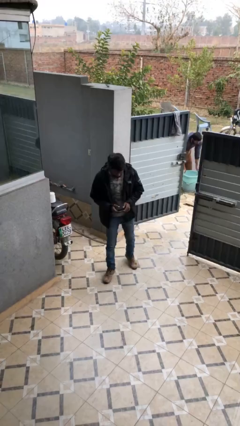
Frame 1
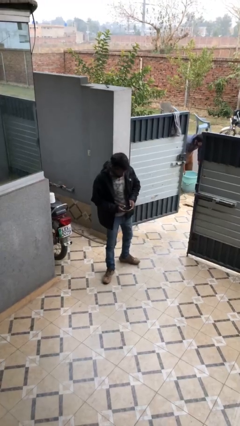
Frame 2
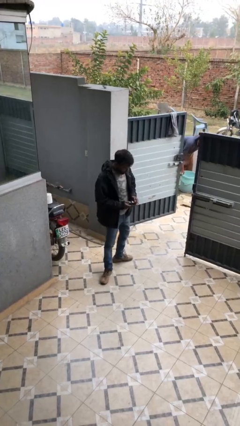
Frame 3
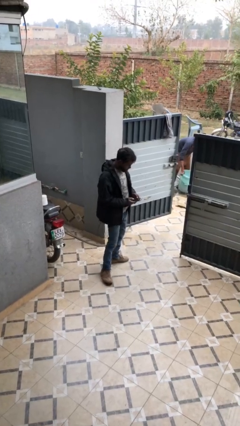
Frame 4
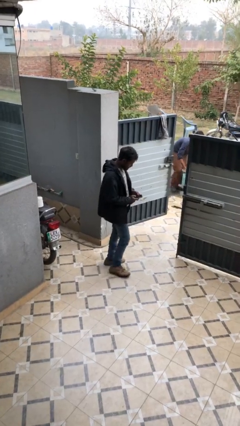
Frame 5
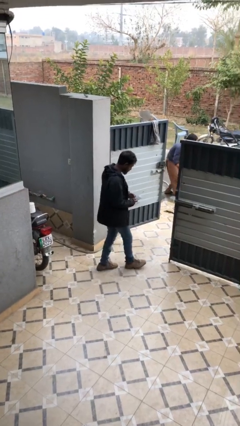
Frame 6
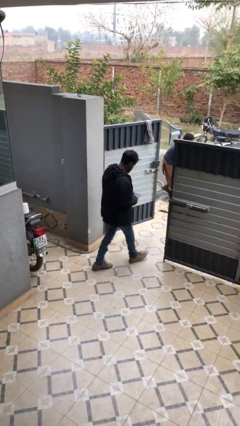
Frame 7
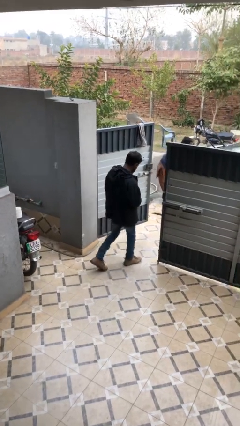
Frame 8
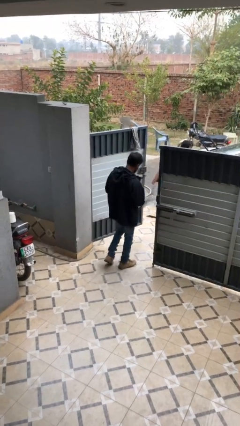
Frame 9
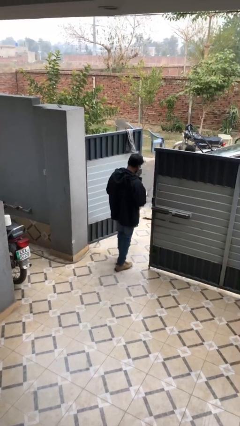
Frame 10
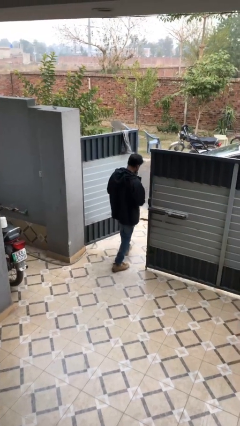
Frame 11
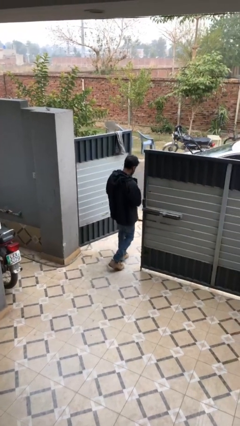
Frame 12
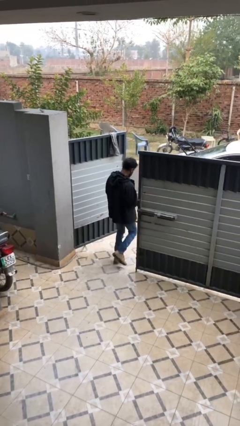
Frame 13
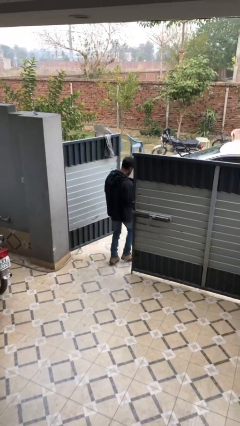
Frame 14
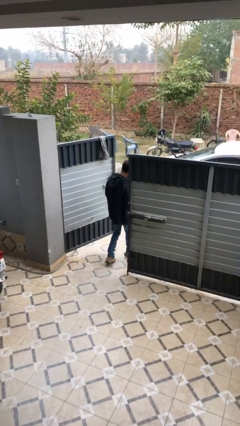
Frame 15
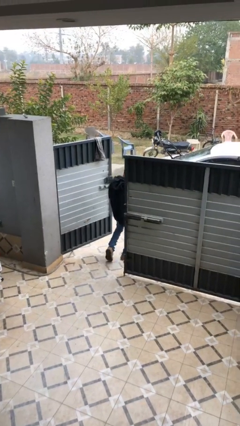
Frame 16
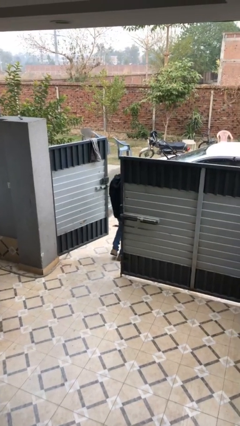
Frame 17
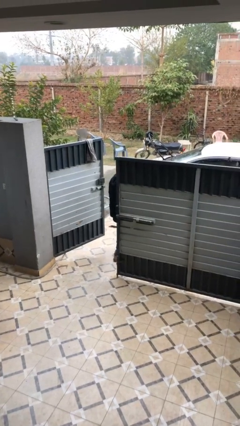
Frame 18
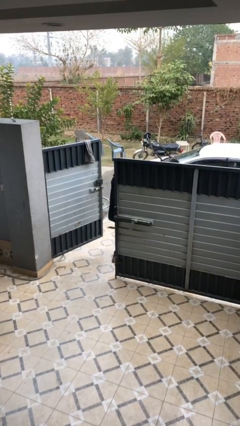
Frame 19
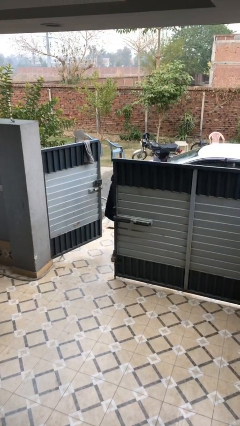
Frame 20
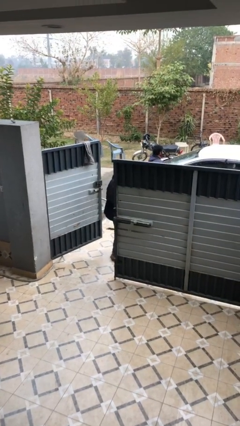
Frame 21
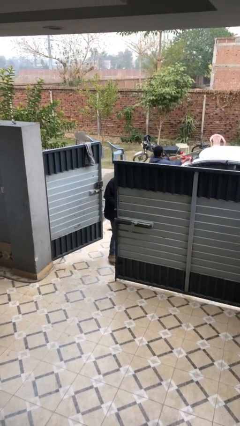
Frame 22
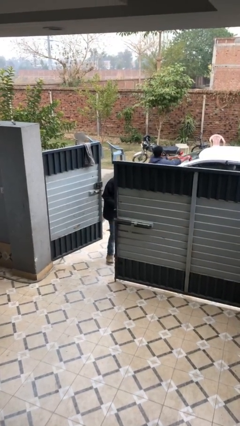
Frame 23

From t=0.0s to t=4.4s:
person exits scene through structure

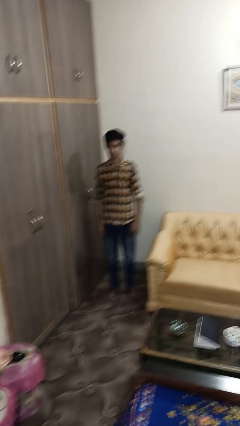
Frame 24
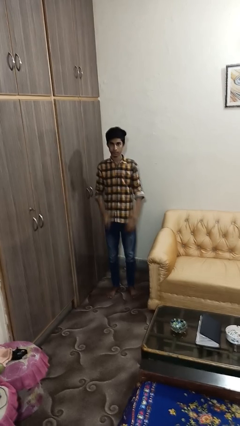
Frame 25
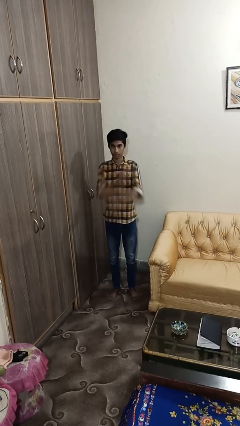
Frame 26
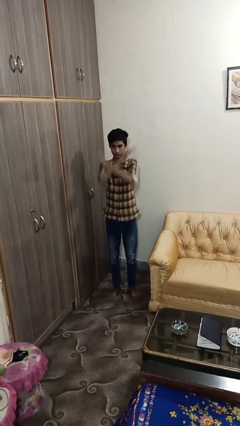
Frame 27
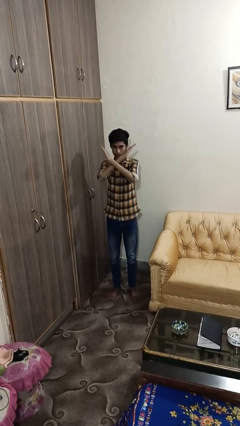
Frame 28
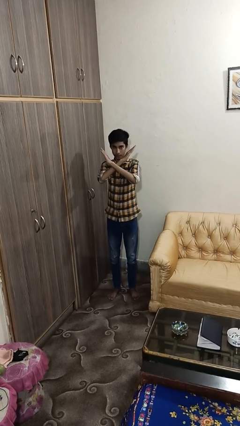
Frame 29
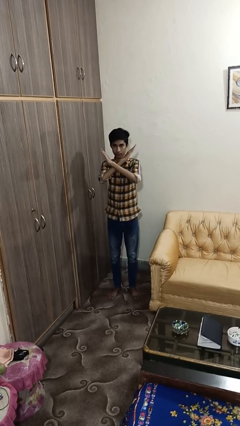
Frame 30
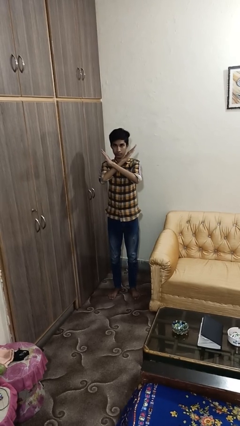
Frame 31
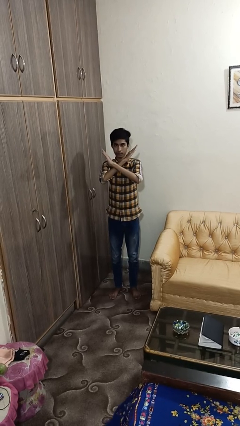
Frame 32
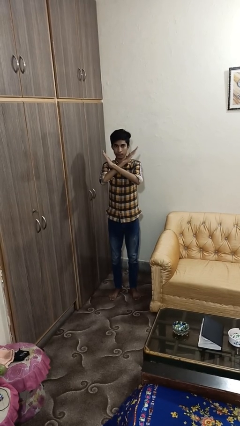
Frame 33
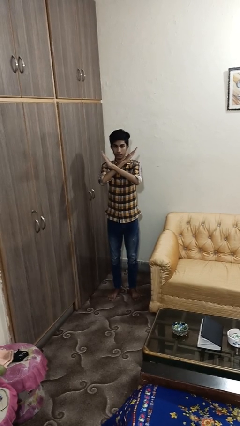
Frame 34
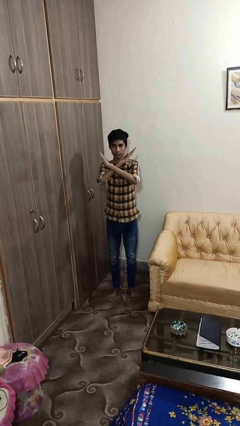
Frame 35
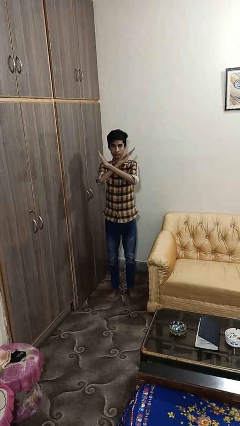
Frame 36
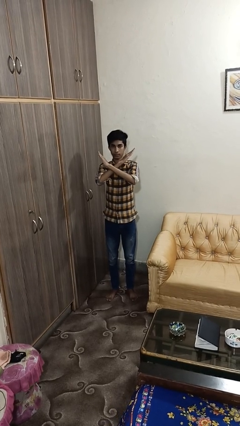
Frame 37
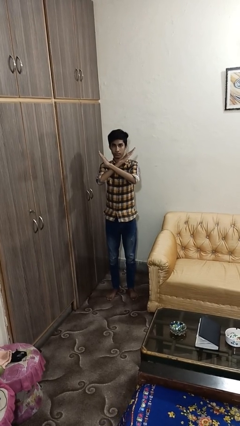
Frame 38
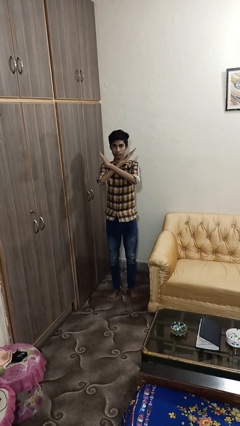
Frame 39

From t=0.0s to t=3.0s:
person gestures arms x

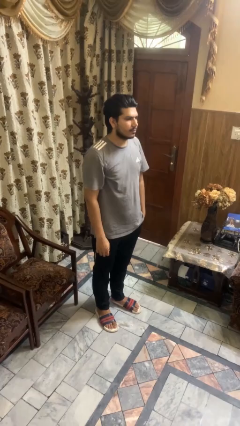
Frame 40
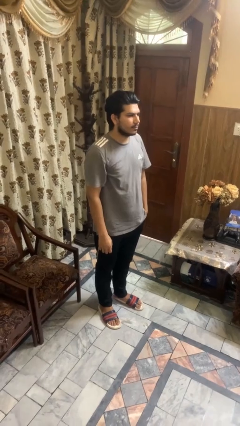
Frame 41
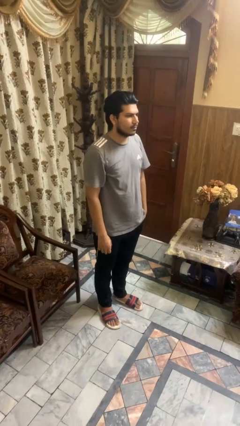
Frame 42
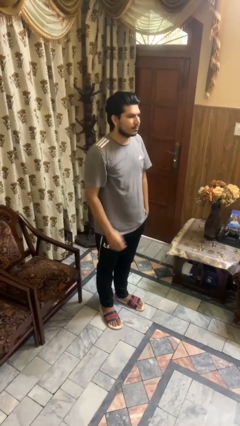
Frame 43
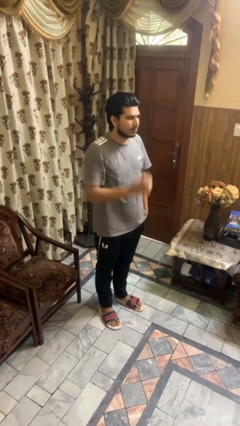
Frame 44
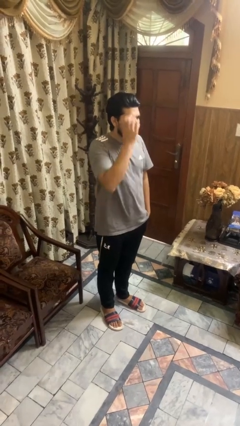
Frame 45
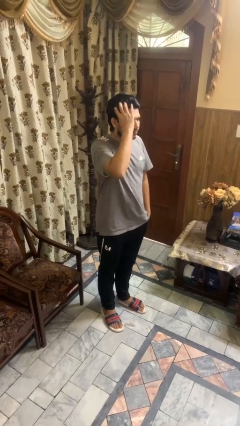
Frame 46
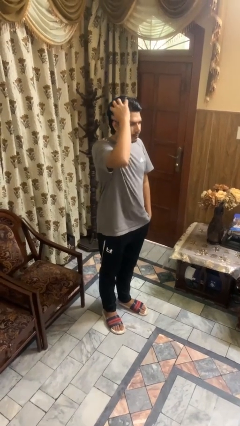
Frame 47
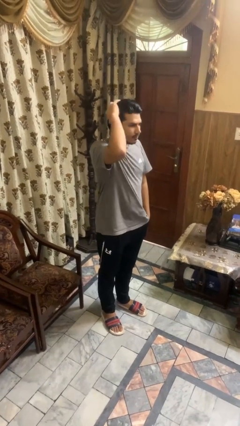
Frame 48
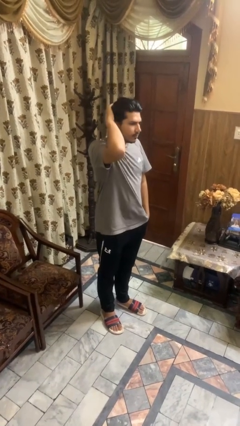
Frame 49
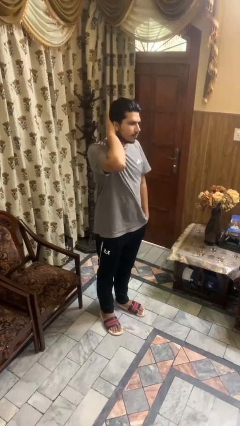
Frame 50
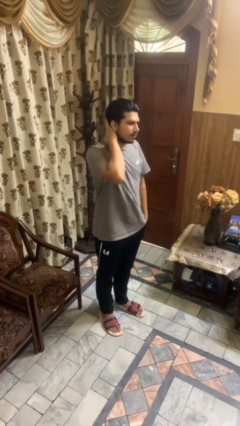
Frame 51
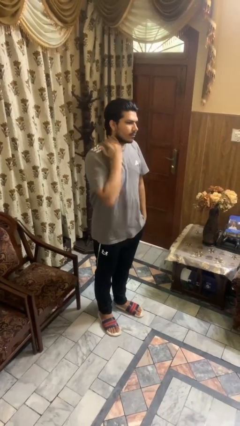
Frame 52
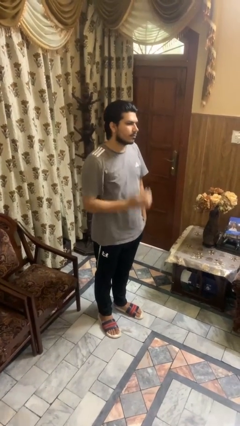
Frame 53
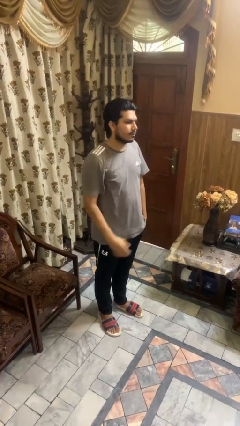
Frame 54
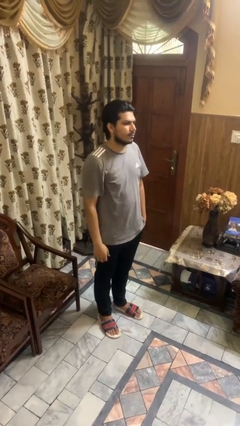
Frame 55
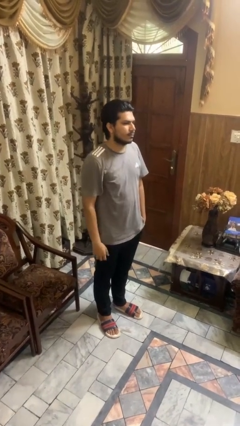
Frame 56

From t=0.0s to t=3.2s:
person strokes hair

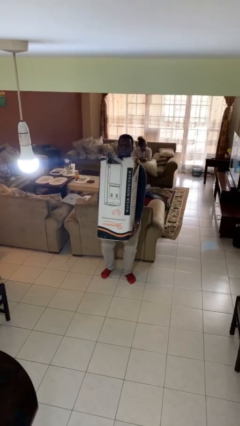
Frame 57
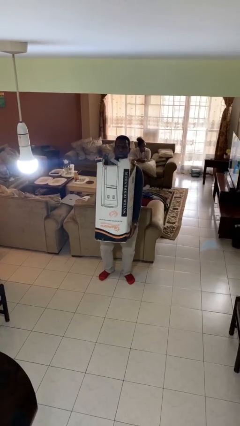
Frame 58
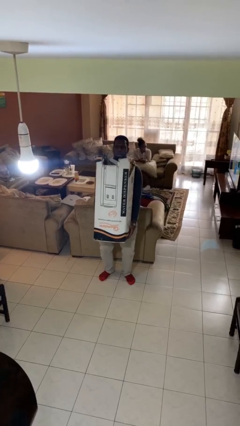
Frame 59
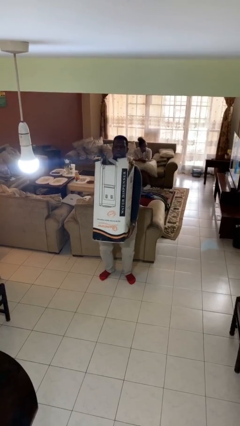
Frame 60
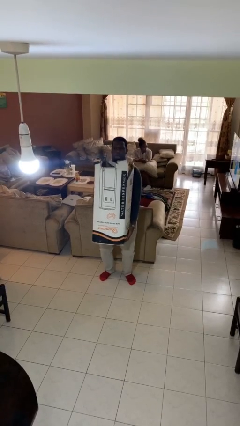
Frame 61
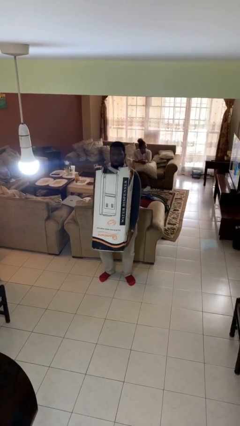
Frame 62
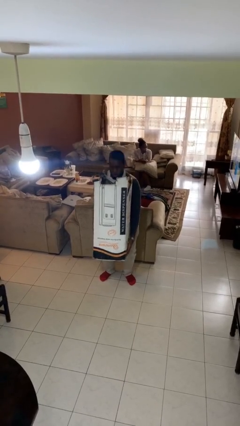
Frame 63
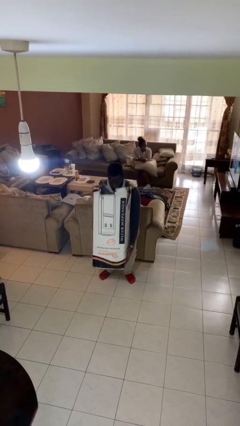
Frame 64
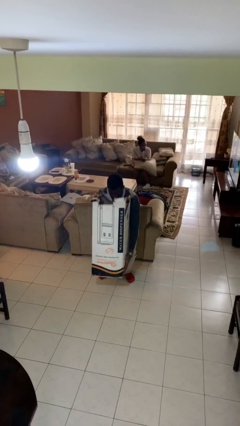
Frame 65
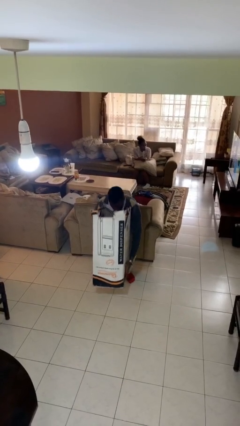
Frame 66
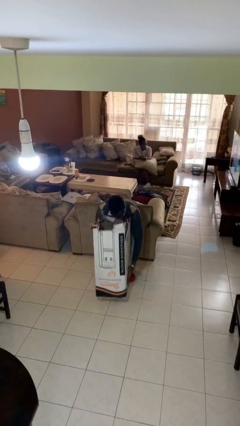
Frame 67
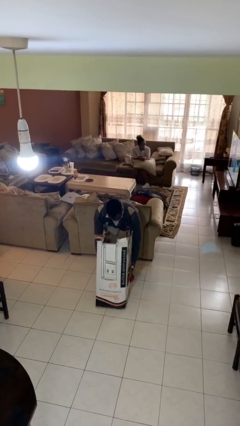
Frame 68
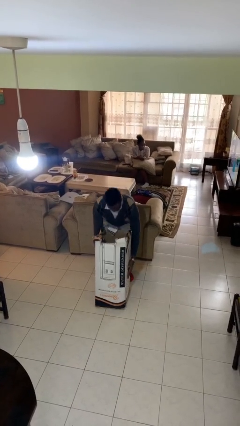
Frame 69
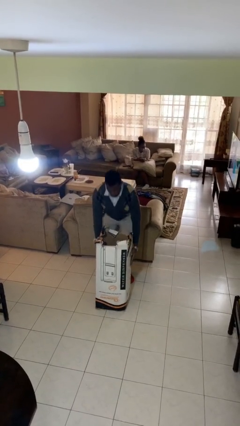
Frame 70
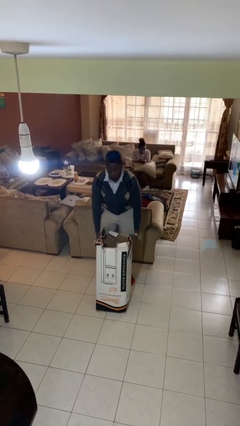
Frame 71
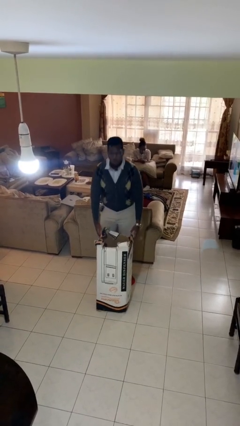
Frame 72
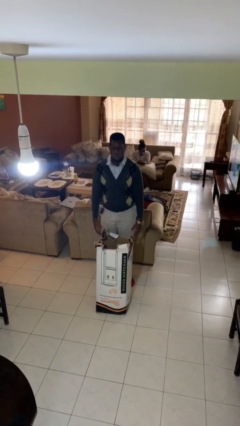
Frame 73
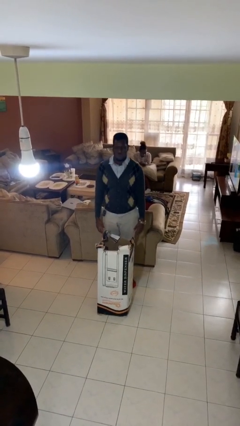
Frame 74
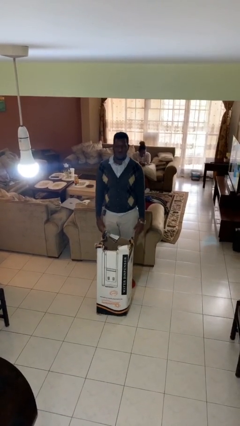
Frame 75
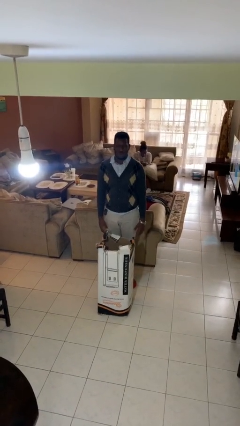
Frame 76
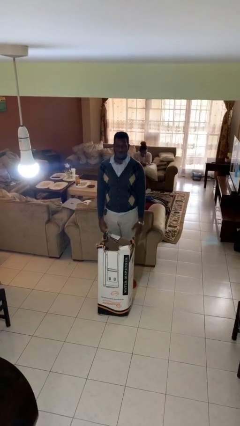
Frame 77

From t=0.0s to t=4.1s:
person puts down object on floor

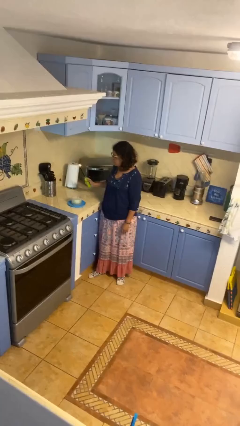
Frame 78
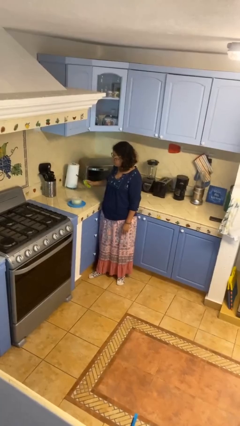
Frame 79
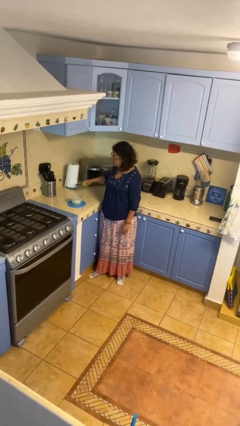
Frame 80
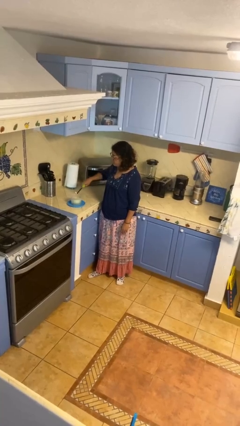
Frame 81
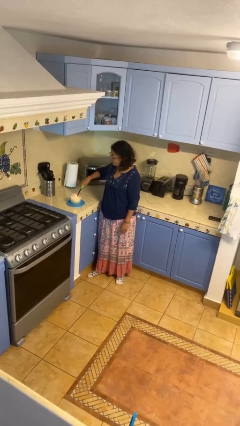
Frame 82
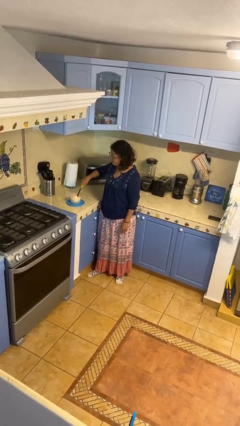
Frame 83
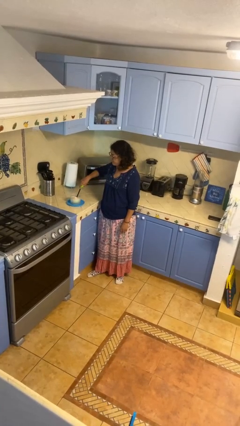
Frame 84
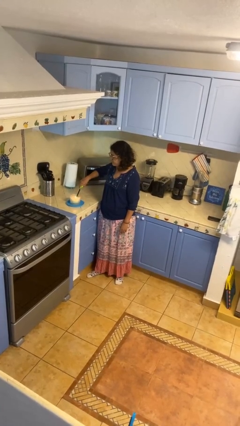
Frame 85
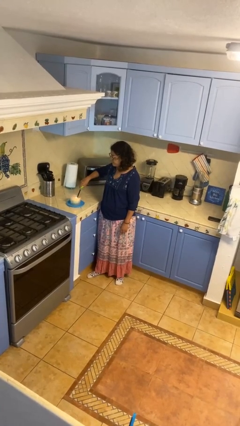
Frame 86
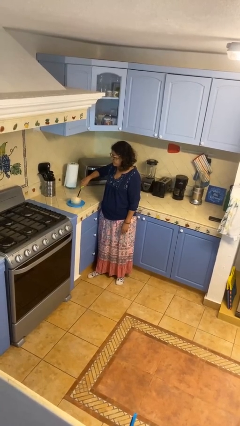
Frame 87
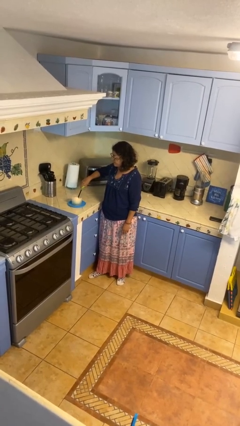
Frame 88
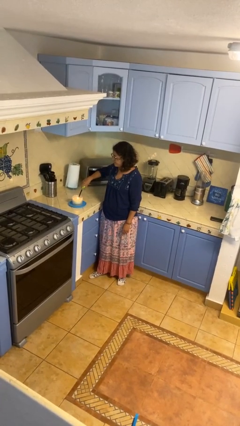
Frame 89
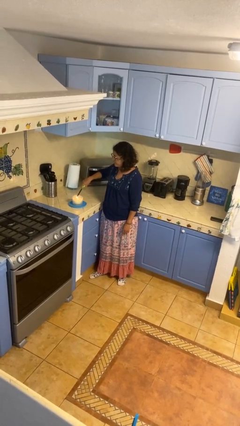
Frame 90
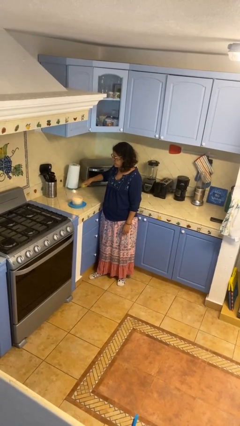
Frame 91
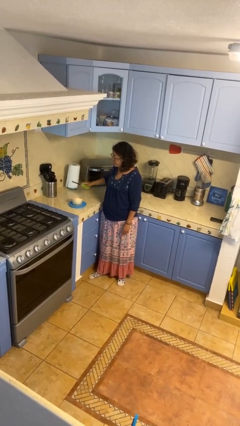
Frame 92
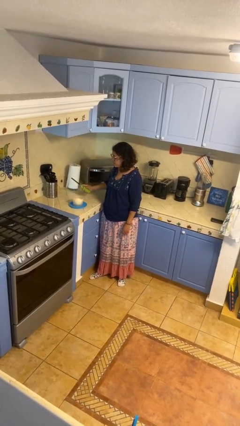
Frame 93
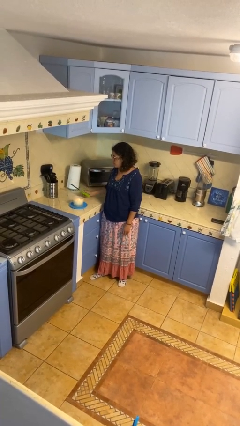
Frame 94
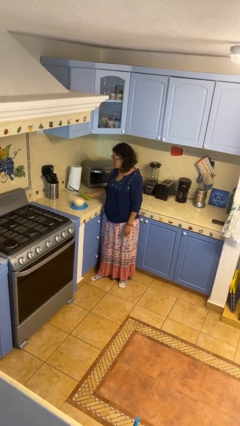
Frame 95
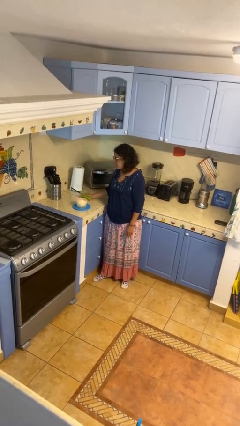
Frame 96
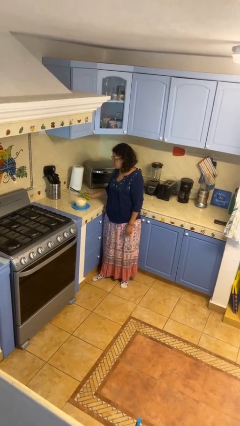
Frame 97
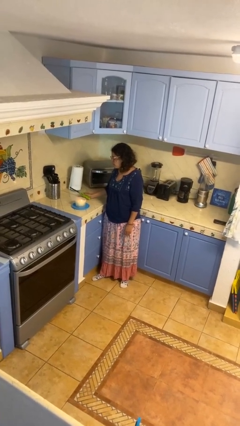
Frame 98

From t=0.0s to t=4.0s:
person lights candle
